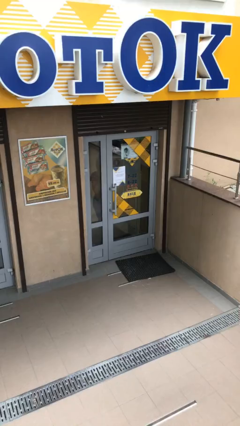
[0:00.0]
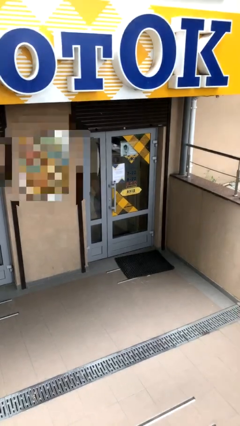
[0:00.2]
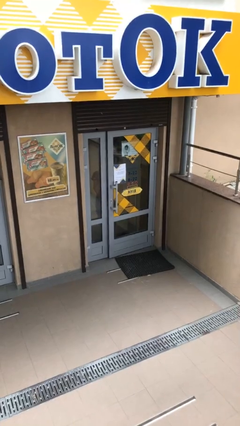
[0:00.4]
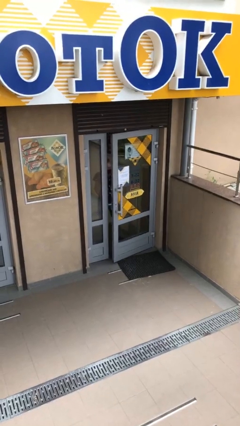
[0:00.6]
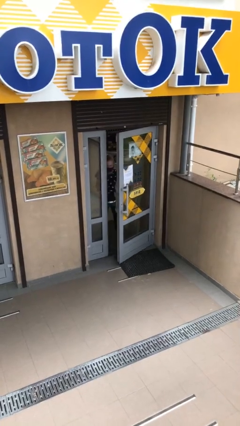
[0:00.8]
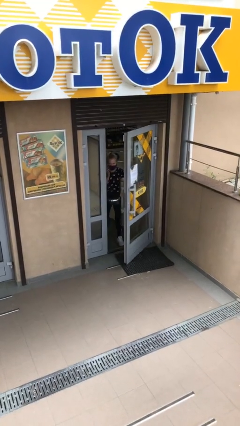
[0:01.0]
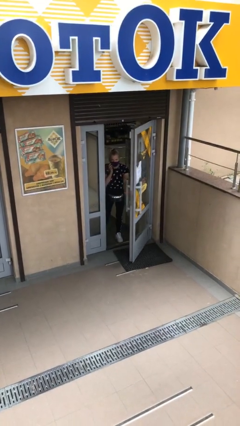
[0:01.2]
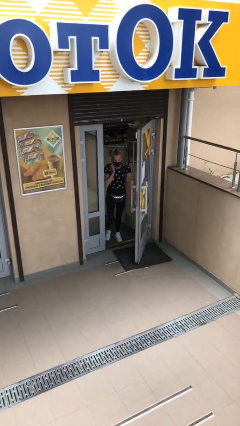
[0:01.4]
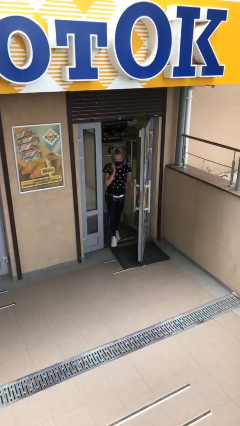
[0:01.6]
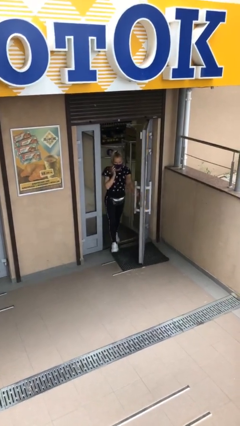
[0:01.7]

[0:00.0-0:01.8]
person opens facility door

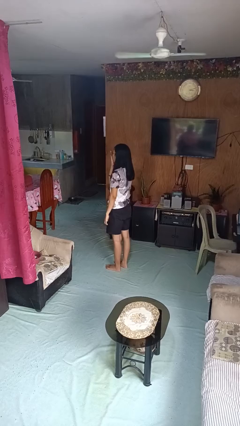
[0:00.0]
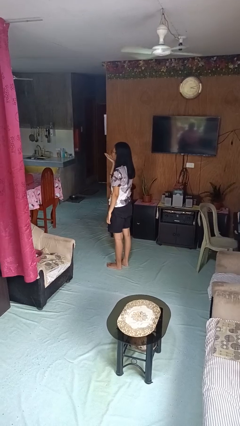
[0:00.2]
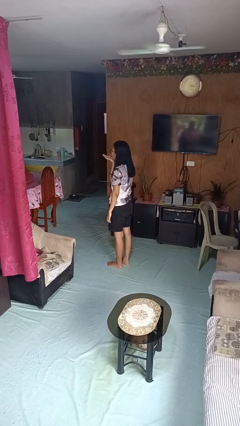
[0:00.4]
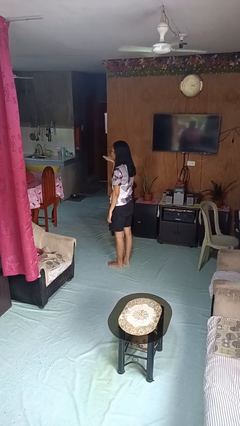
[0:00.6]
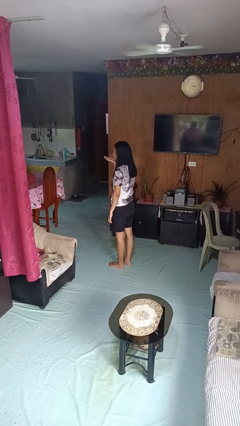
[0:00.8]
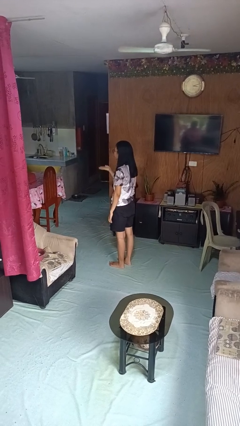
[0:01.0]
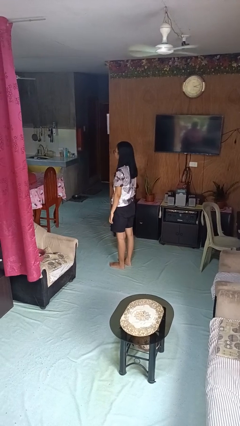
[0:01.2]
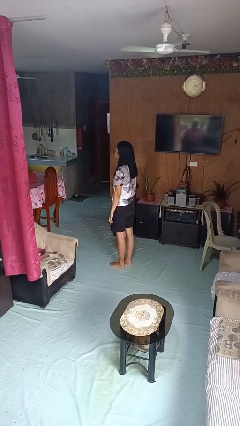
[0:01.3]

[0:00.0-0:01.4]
person gestures blow kiss

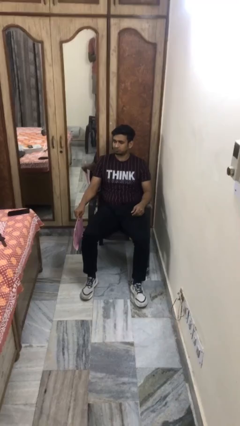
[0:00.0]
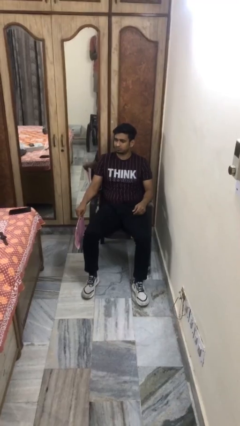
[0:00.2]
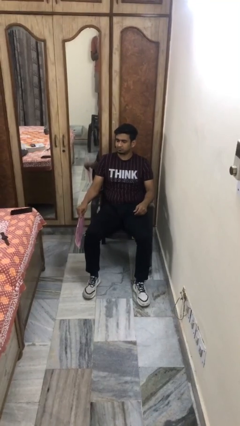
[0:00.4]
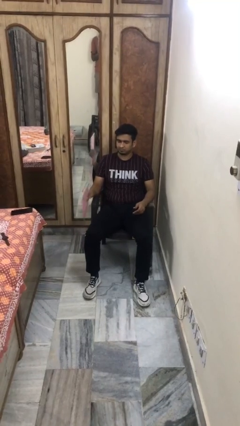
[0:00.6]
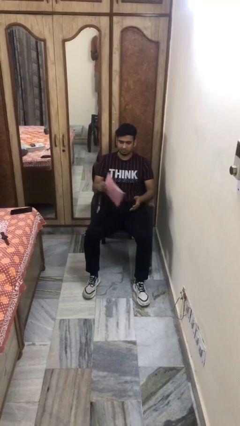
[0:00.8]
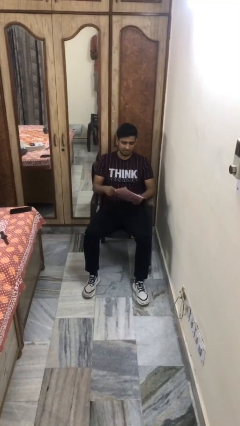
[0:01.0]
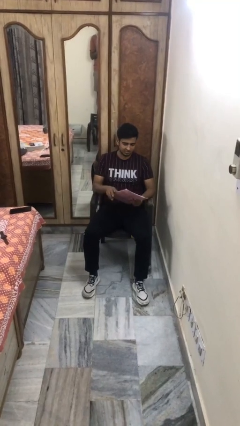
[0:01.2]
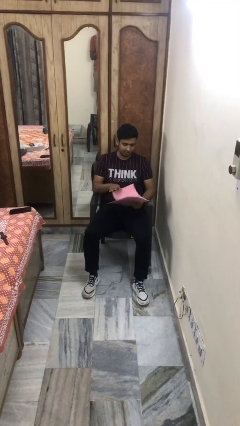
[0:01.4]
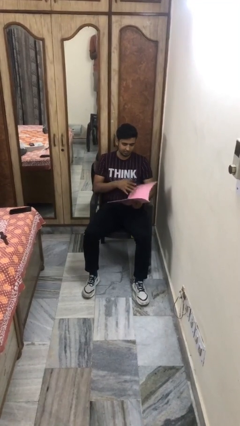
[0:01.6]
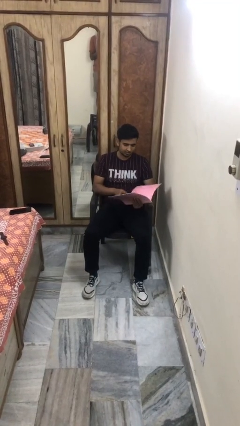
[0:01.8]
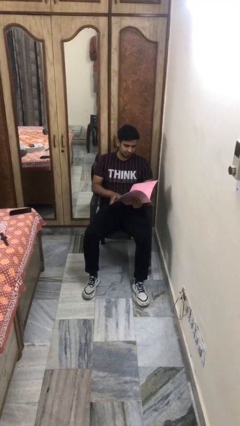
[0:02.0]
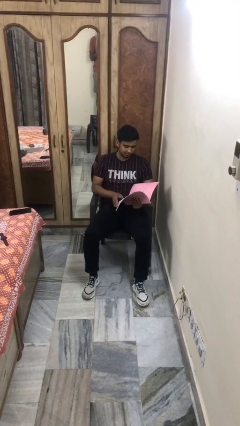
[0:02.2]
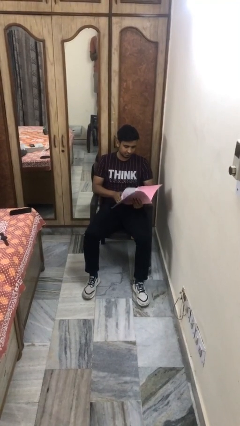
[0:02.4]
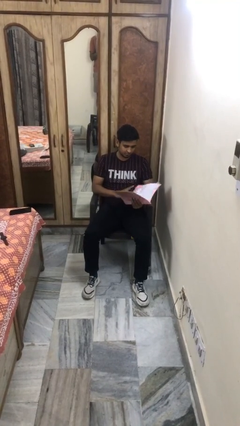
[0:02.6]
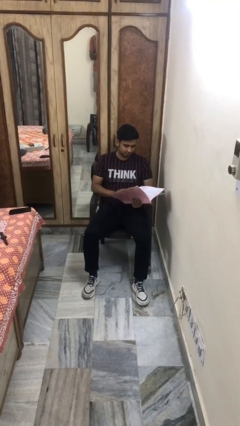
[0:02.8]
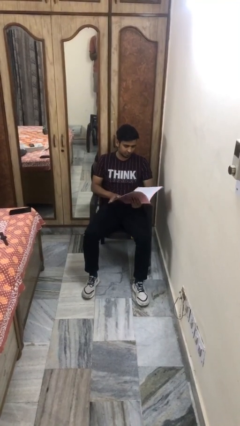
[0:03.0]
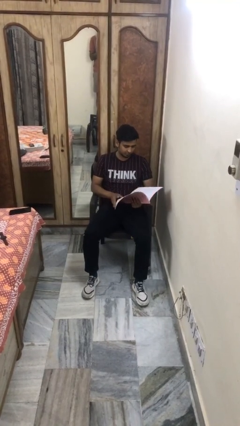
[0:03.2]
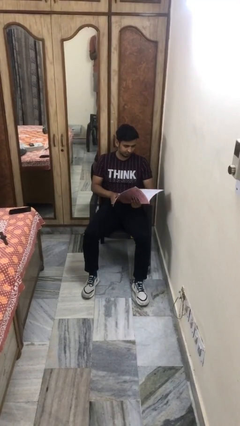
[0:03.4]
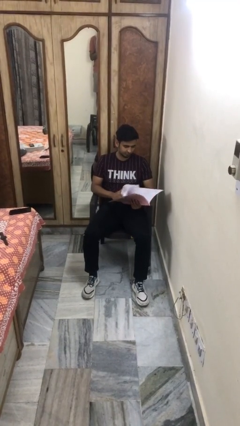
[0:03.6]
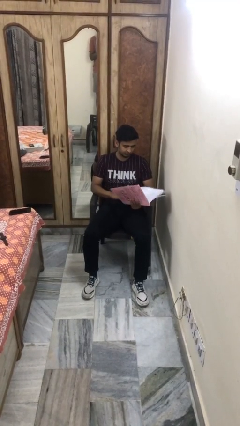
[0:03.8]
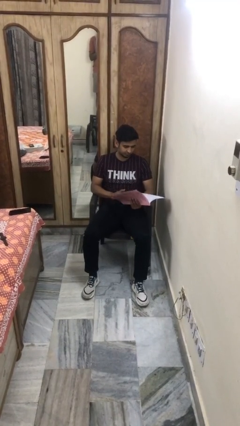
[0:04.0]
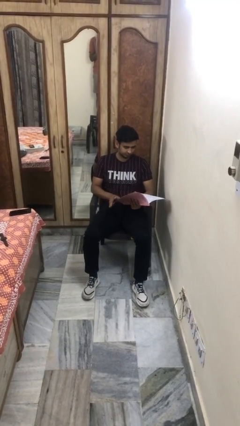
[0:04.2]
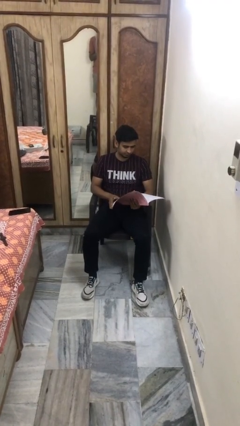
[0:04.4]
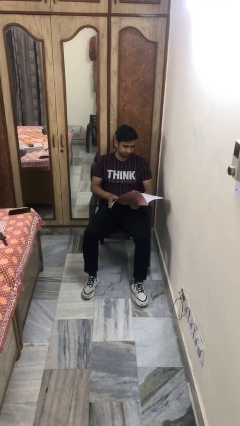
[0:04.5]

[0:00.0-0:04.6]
person reads magazine

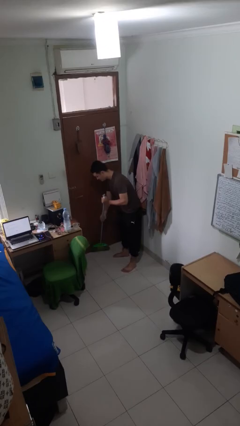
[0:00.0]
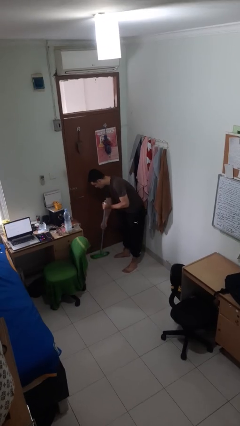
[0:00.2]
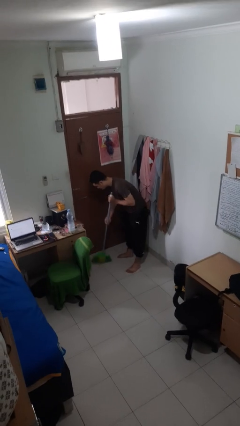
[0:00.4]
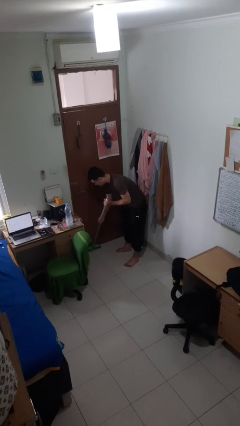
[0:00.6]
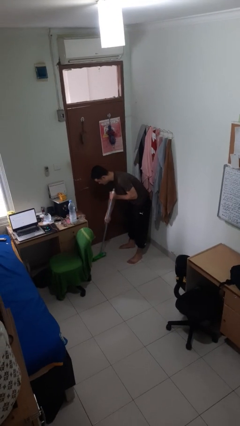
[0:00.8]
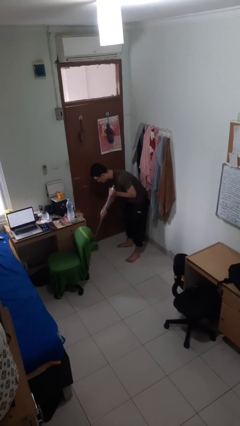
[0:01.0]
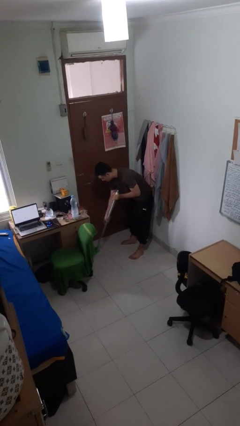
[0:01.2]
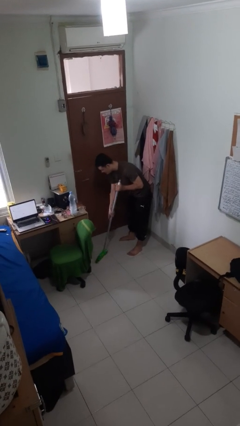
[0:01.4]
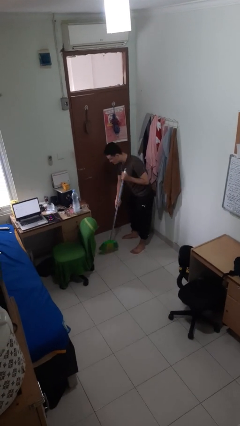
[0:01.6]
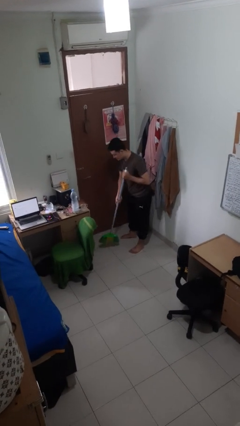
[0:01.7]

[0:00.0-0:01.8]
person sweeps floor

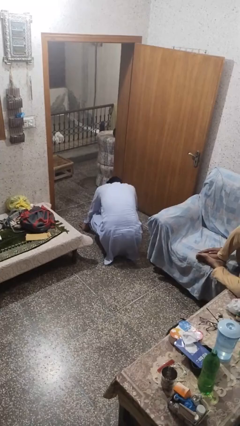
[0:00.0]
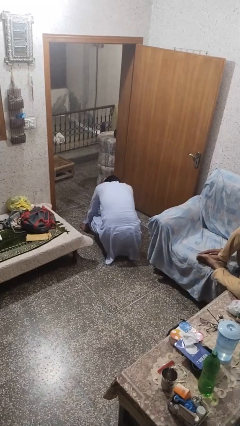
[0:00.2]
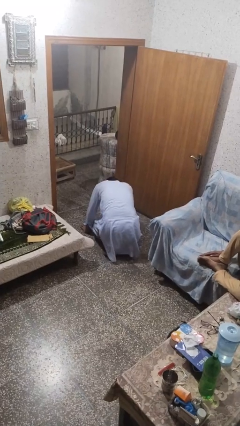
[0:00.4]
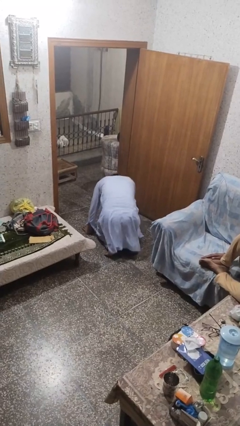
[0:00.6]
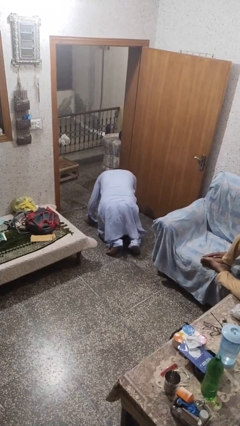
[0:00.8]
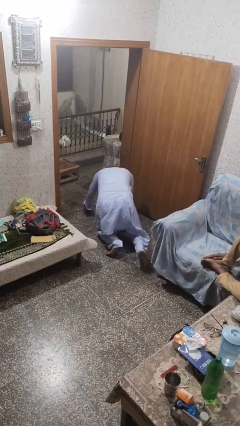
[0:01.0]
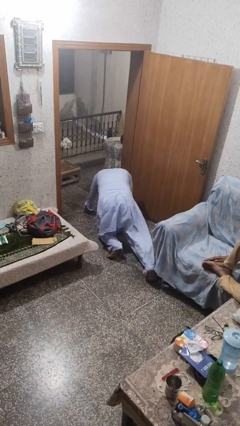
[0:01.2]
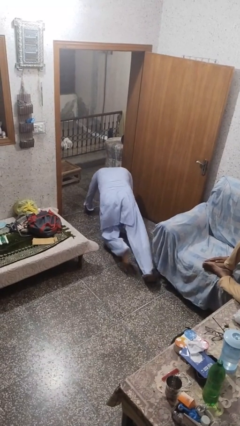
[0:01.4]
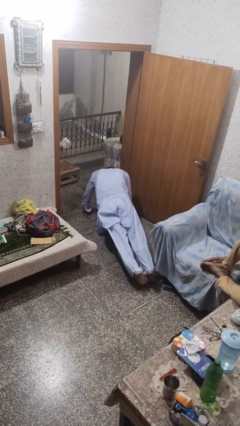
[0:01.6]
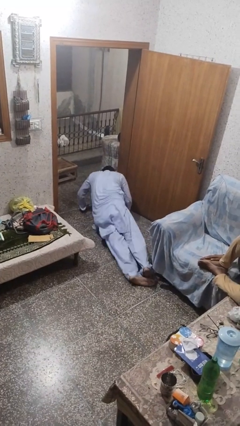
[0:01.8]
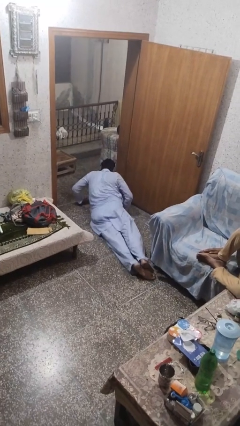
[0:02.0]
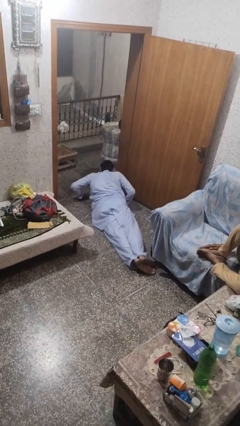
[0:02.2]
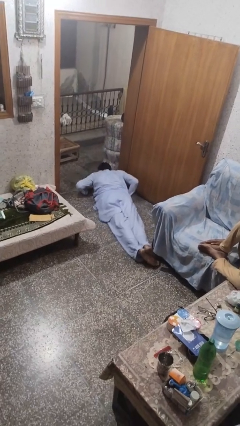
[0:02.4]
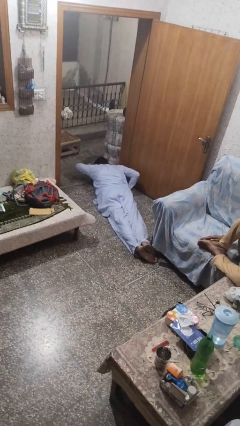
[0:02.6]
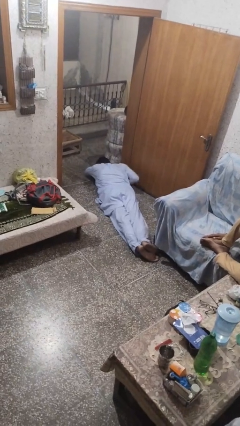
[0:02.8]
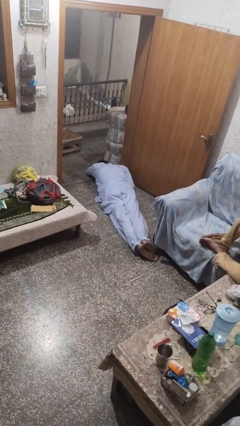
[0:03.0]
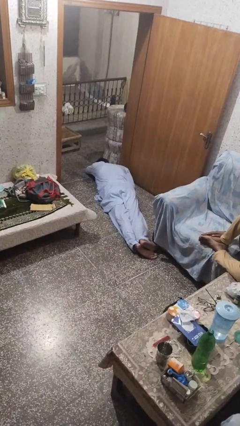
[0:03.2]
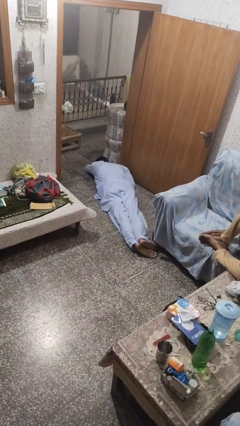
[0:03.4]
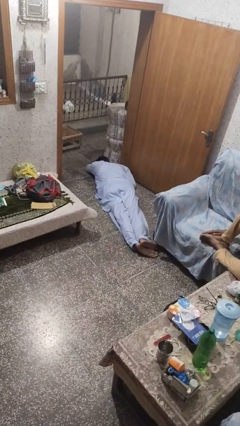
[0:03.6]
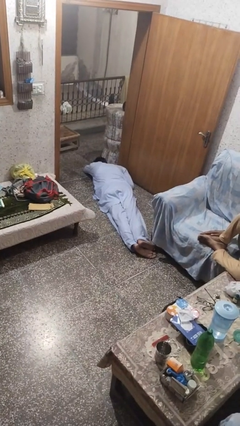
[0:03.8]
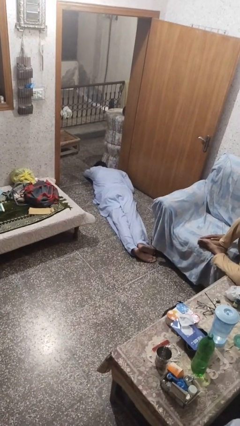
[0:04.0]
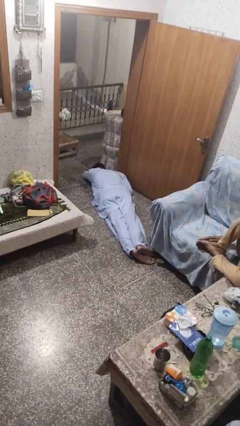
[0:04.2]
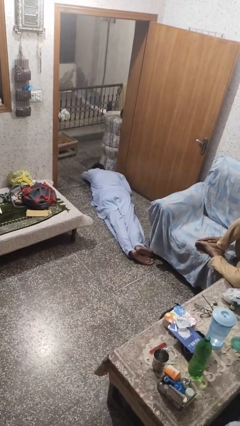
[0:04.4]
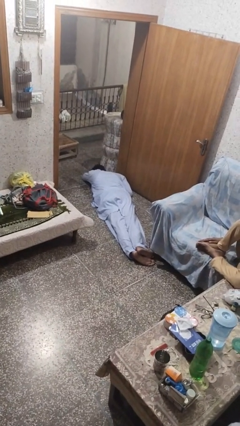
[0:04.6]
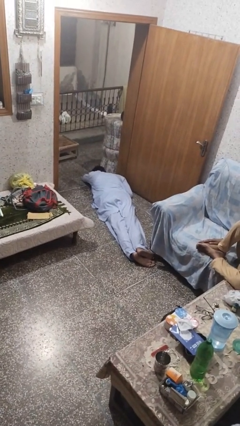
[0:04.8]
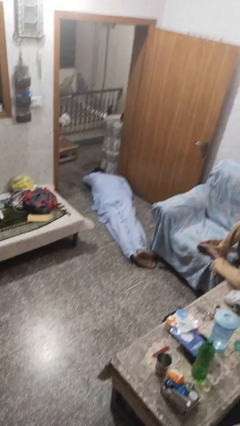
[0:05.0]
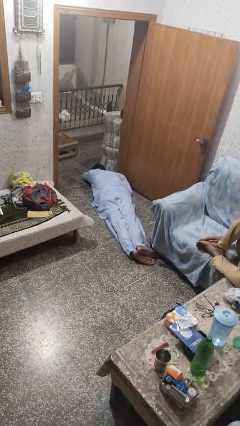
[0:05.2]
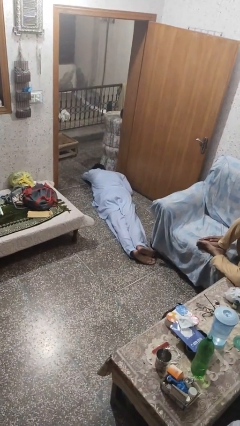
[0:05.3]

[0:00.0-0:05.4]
person lies down on floor

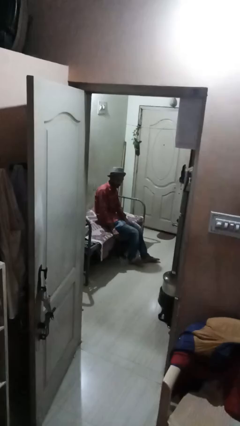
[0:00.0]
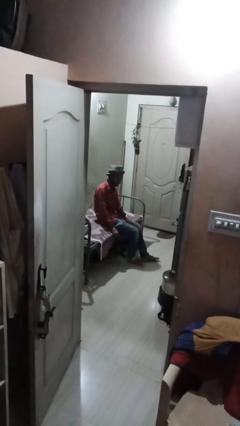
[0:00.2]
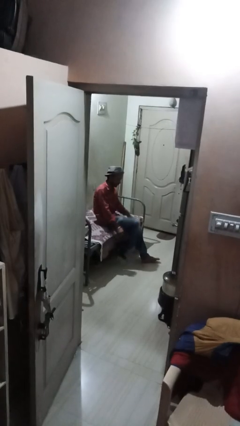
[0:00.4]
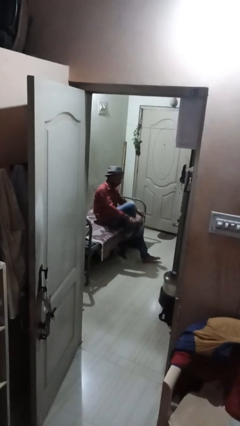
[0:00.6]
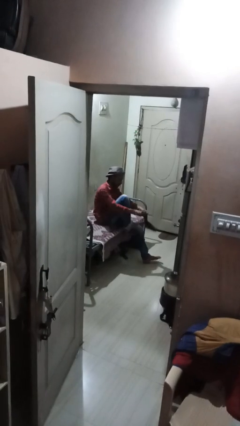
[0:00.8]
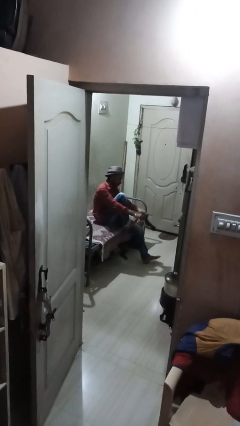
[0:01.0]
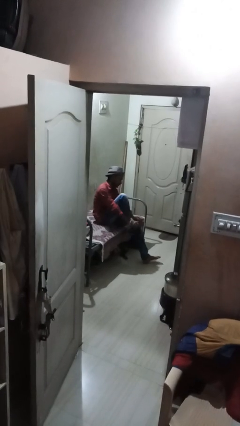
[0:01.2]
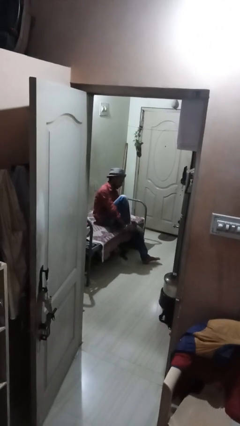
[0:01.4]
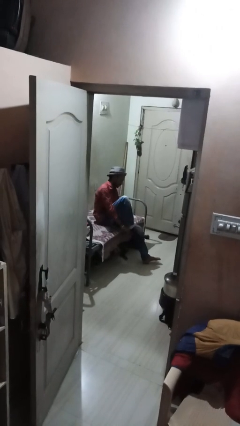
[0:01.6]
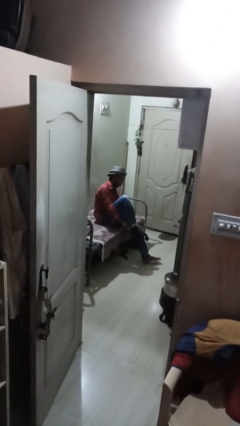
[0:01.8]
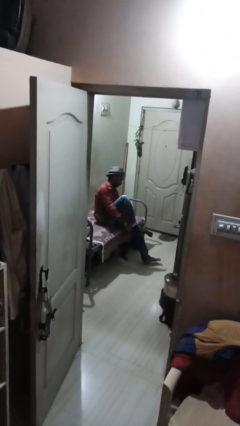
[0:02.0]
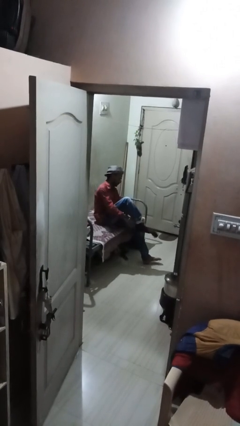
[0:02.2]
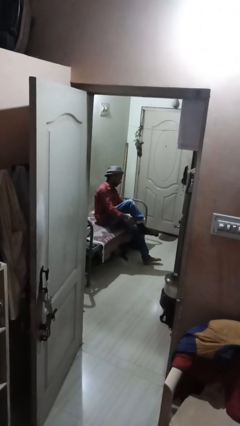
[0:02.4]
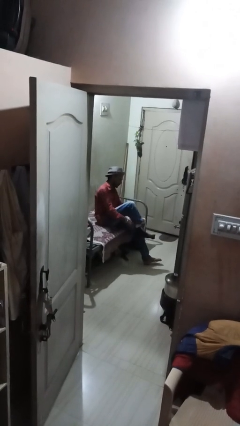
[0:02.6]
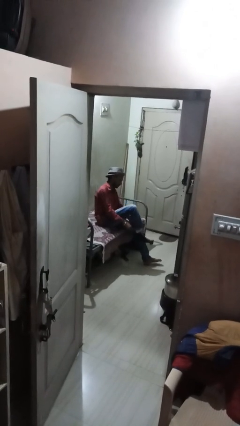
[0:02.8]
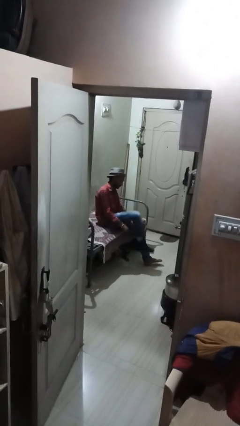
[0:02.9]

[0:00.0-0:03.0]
person puts on socks
